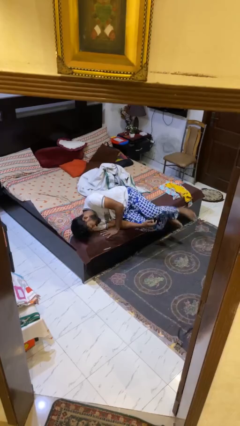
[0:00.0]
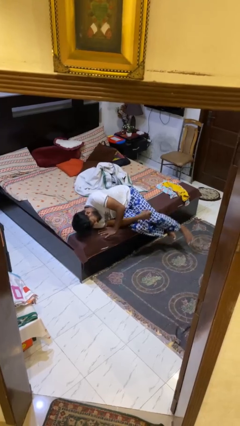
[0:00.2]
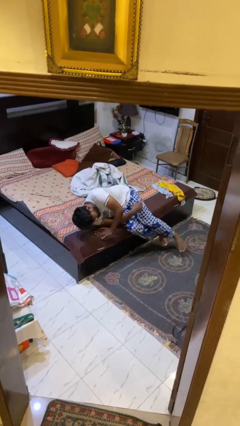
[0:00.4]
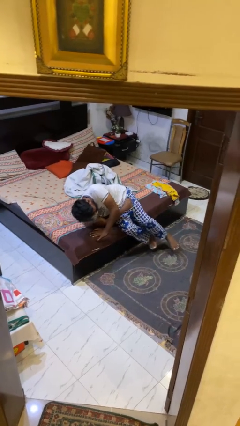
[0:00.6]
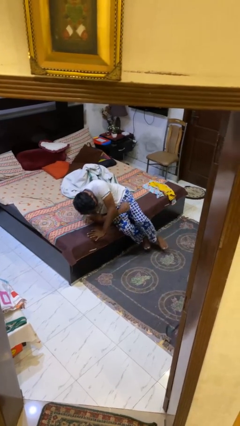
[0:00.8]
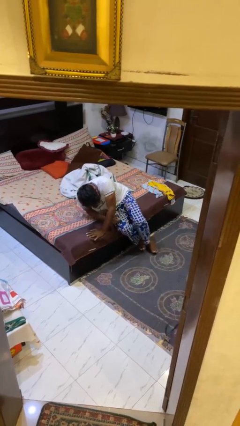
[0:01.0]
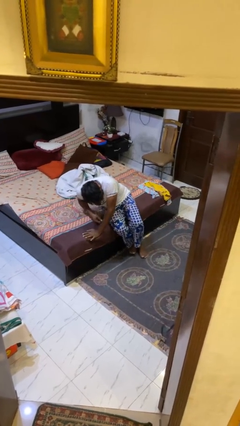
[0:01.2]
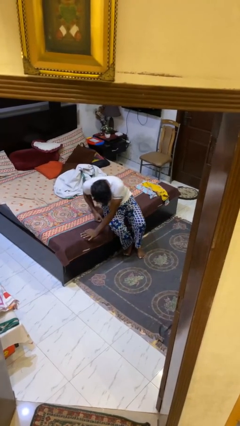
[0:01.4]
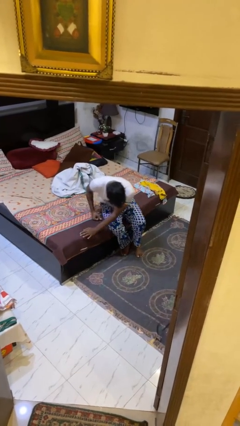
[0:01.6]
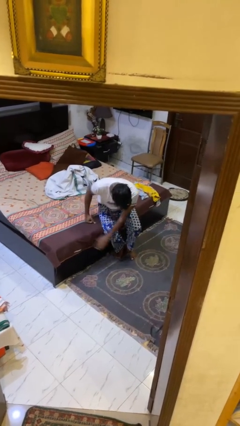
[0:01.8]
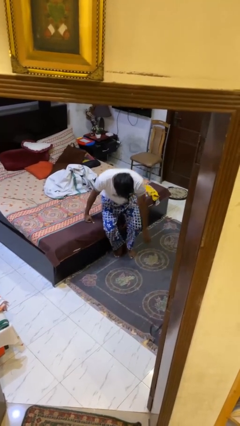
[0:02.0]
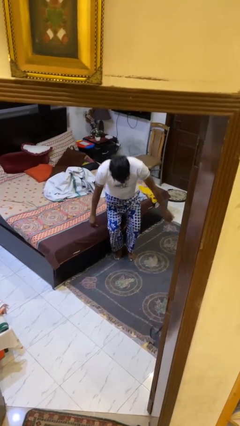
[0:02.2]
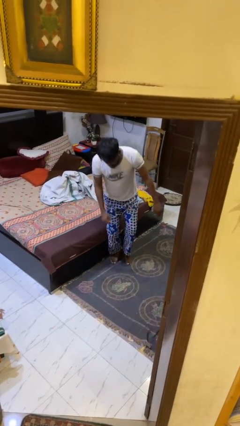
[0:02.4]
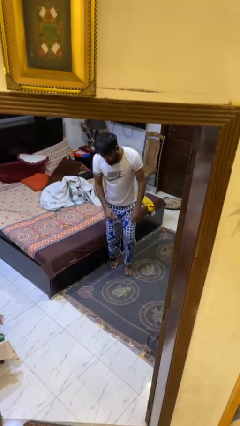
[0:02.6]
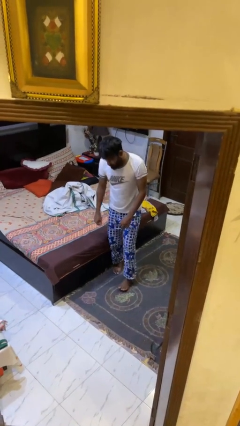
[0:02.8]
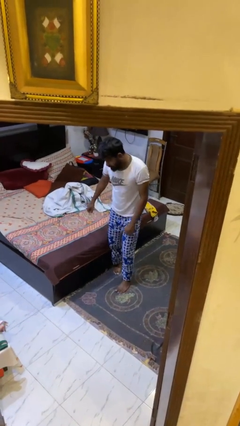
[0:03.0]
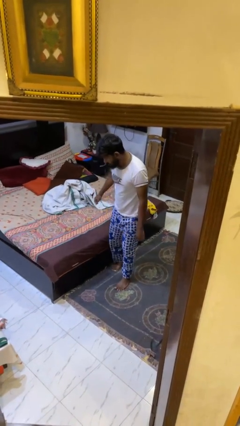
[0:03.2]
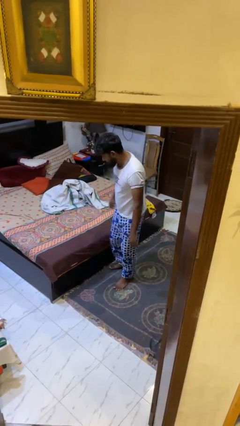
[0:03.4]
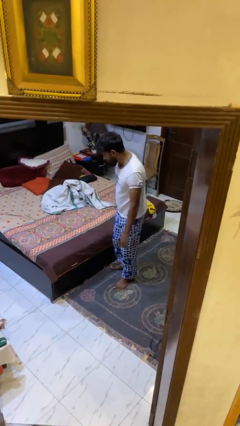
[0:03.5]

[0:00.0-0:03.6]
person stands up

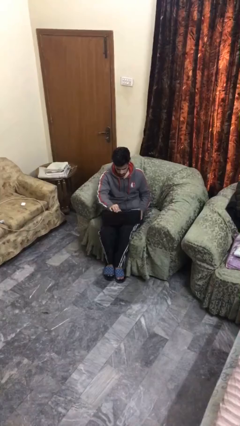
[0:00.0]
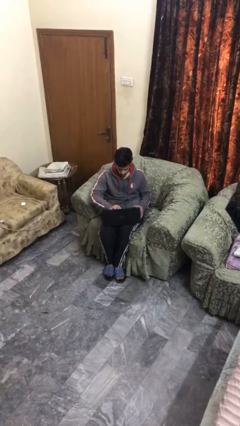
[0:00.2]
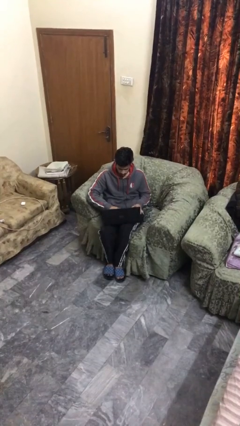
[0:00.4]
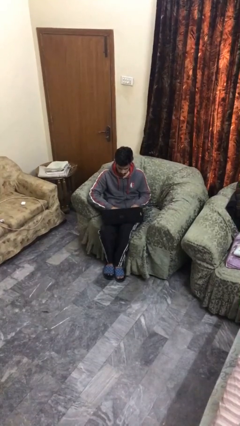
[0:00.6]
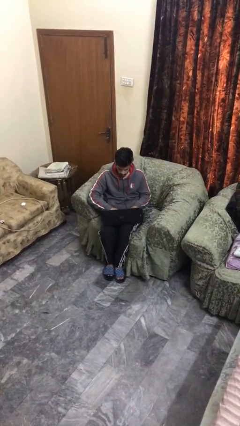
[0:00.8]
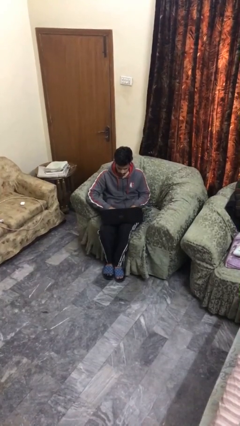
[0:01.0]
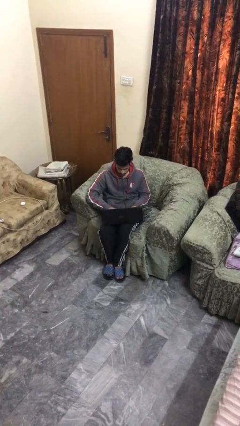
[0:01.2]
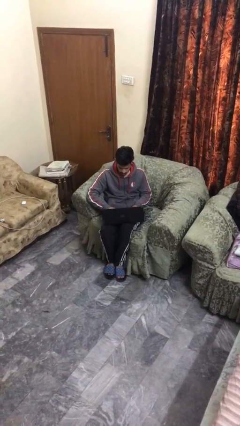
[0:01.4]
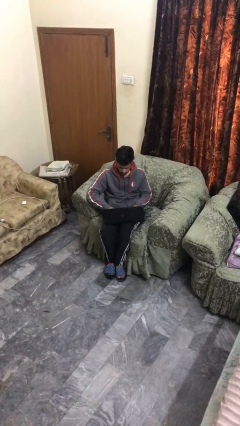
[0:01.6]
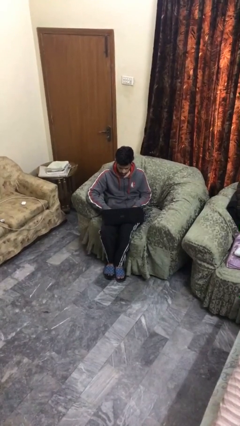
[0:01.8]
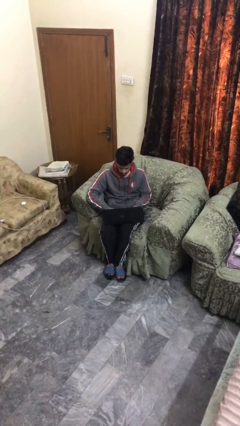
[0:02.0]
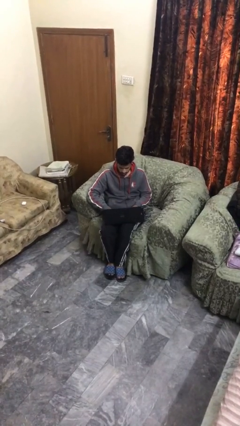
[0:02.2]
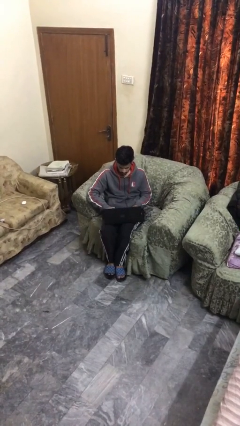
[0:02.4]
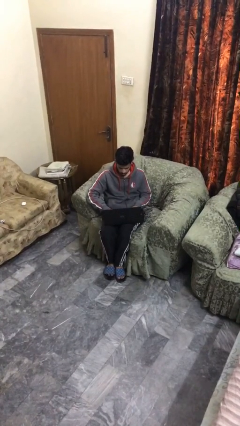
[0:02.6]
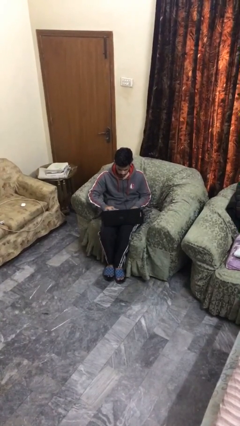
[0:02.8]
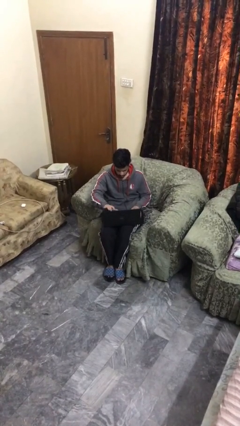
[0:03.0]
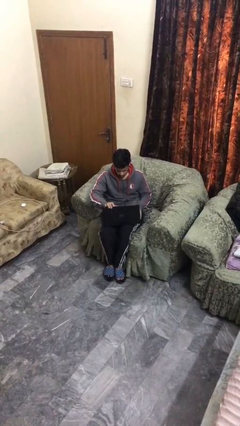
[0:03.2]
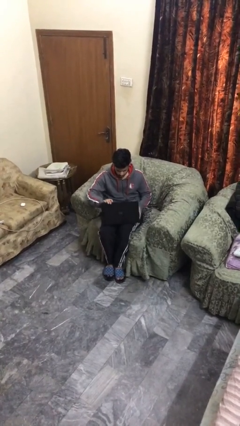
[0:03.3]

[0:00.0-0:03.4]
person interacts with laptop

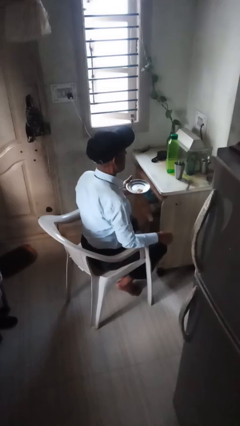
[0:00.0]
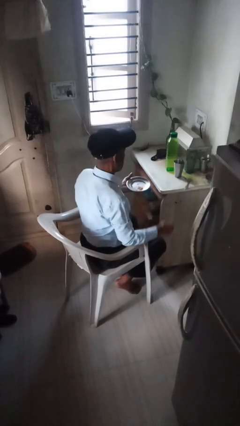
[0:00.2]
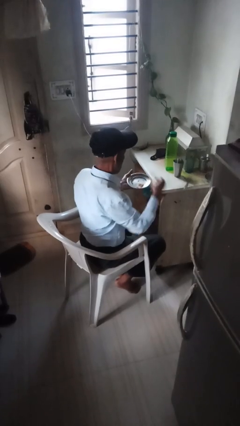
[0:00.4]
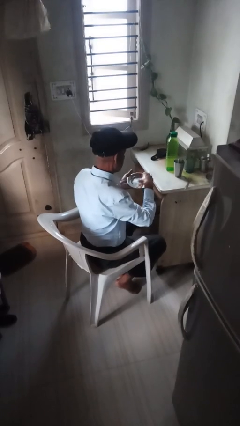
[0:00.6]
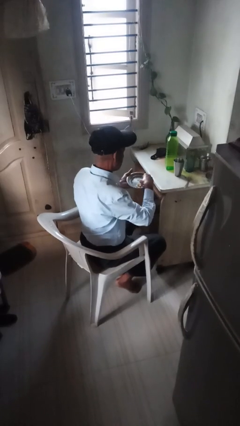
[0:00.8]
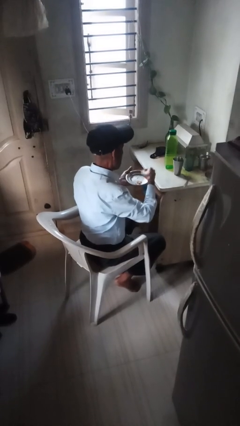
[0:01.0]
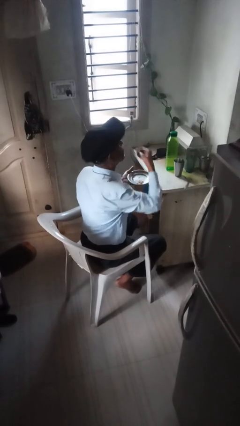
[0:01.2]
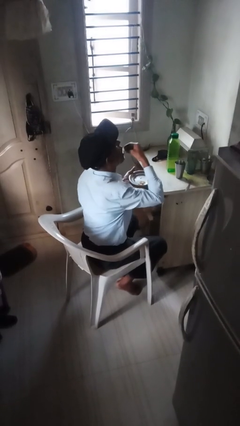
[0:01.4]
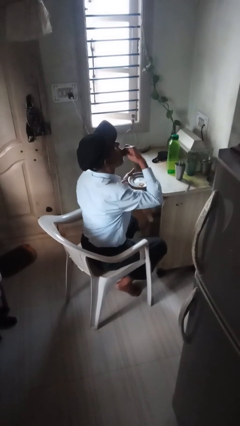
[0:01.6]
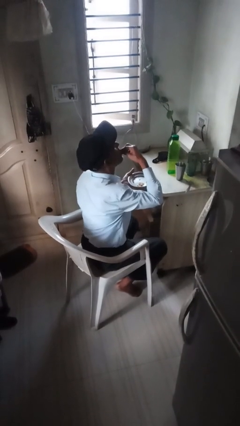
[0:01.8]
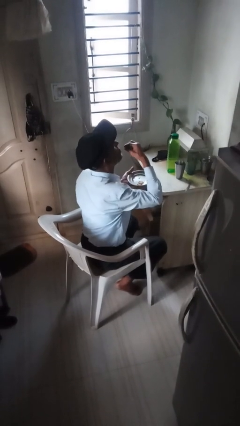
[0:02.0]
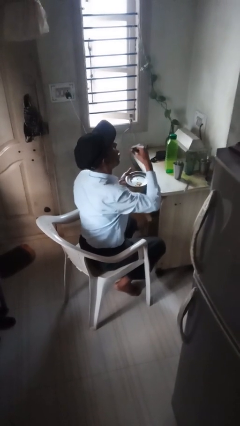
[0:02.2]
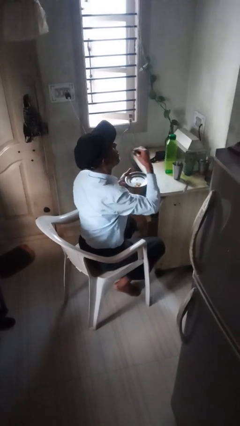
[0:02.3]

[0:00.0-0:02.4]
person eats with hands

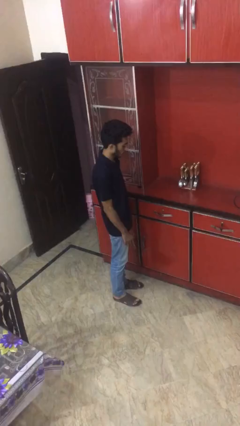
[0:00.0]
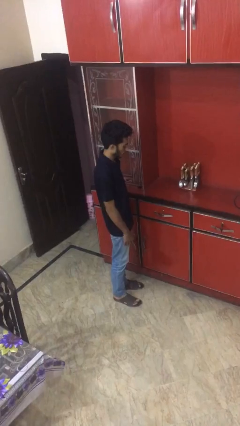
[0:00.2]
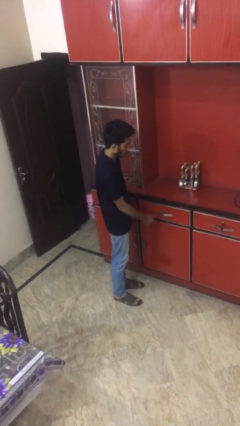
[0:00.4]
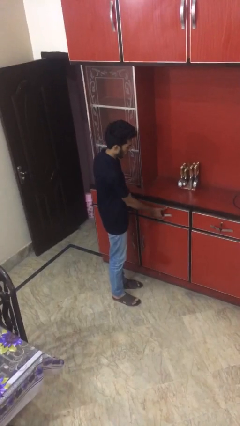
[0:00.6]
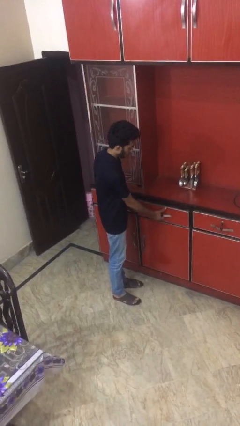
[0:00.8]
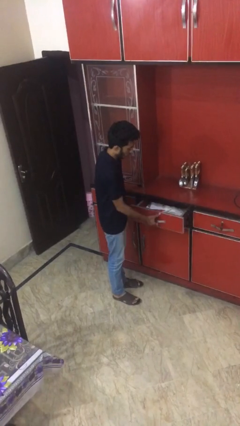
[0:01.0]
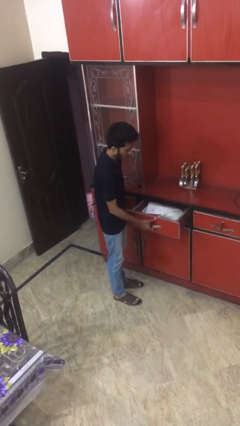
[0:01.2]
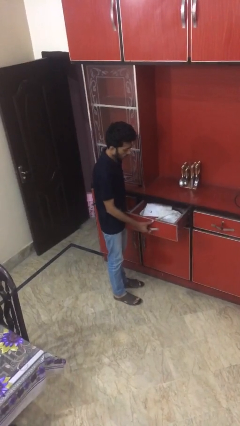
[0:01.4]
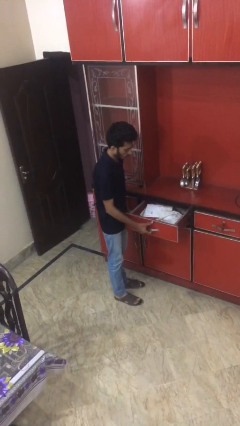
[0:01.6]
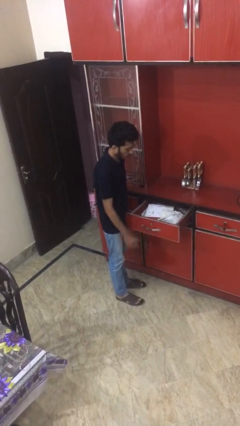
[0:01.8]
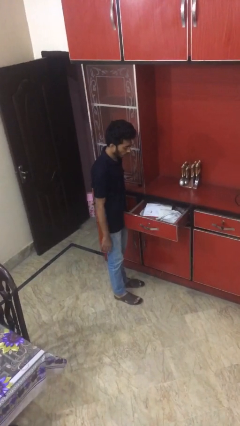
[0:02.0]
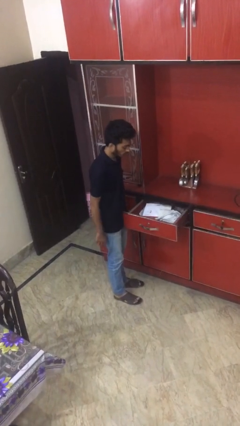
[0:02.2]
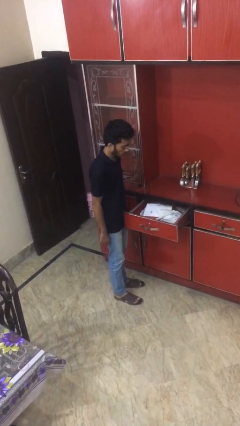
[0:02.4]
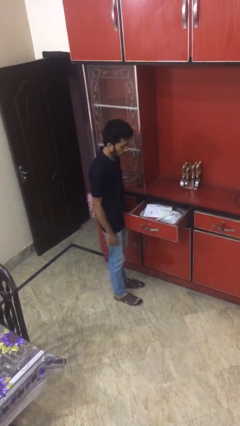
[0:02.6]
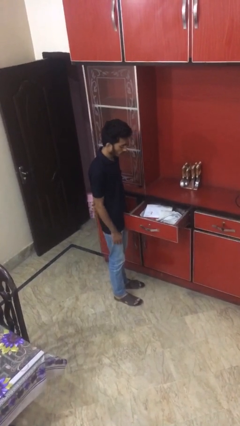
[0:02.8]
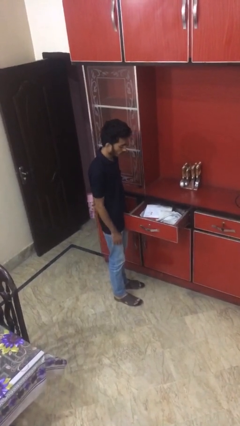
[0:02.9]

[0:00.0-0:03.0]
person opens kitchen drawer

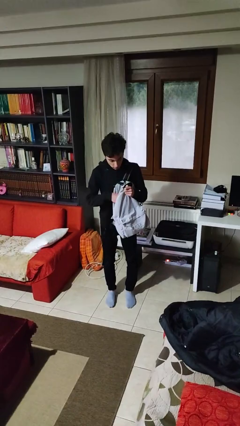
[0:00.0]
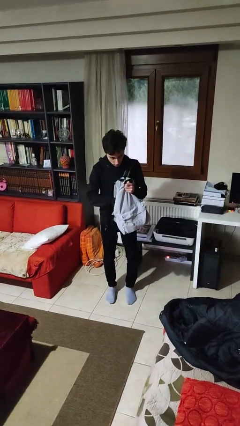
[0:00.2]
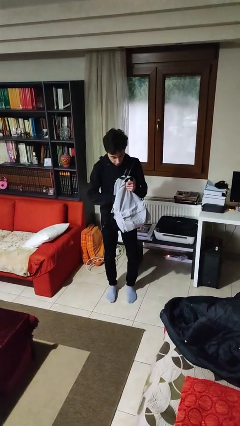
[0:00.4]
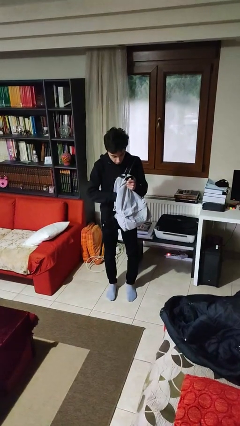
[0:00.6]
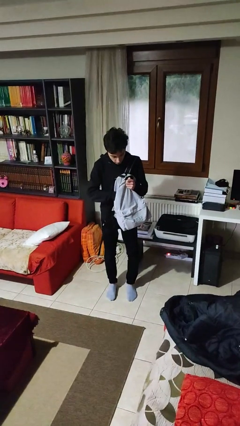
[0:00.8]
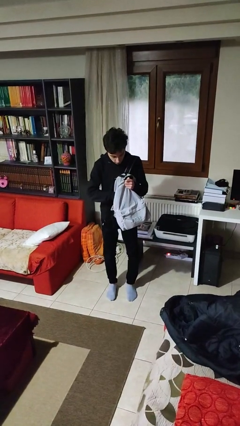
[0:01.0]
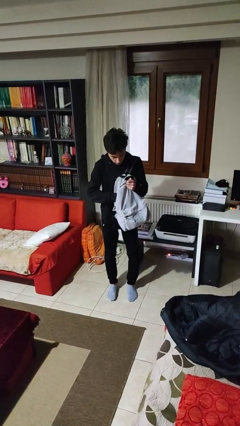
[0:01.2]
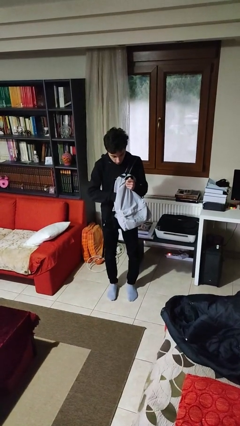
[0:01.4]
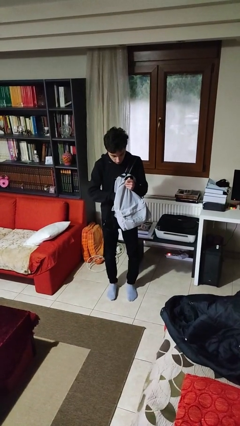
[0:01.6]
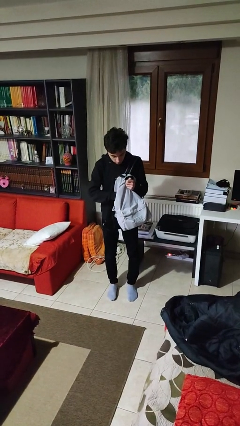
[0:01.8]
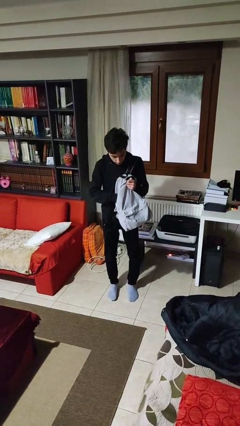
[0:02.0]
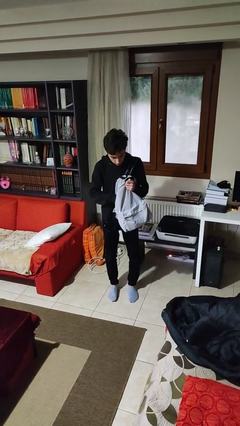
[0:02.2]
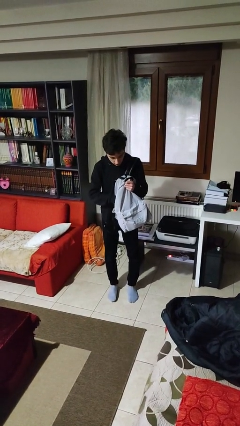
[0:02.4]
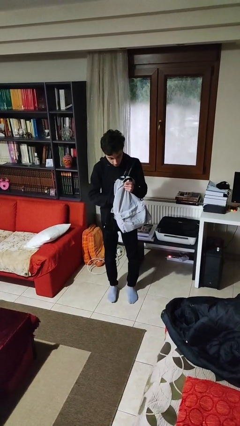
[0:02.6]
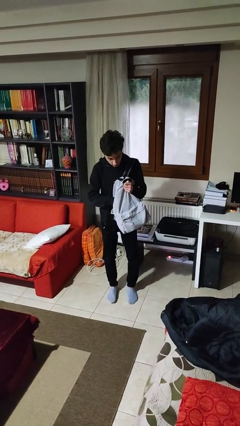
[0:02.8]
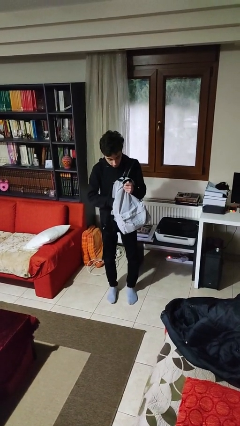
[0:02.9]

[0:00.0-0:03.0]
person searches in backpack

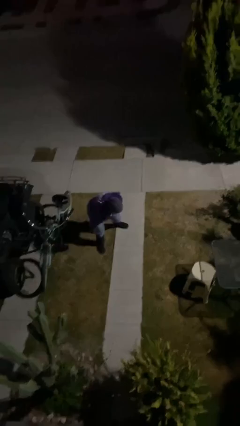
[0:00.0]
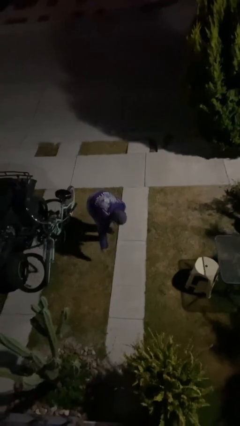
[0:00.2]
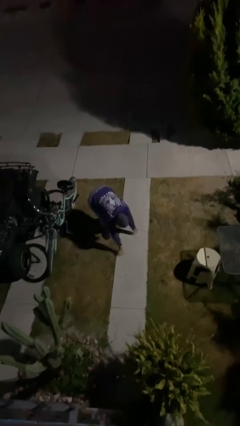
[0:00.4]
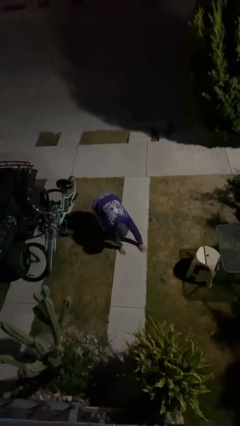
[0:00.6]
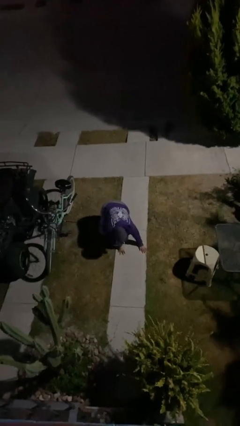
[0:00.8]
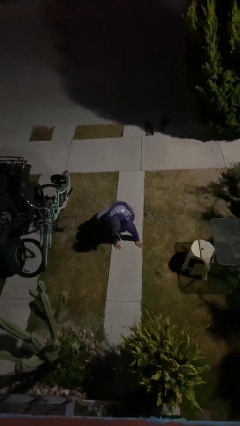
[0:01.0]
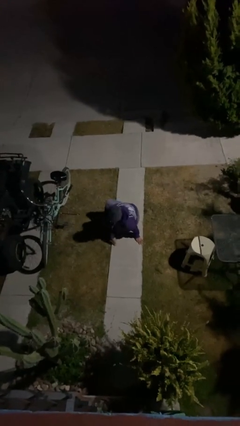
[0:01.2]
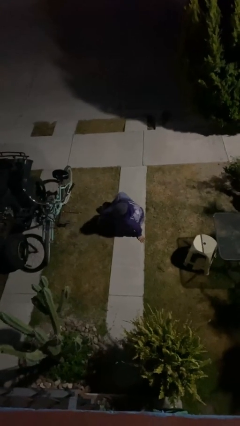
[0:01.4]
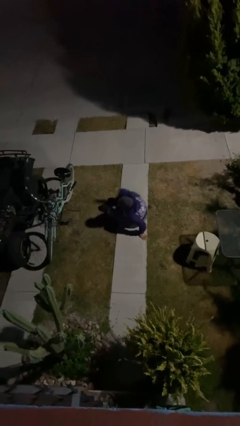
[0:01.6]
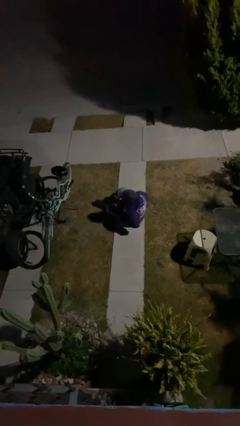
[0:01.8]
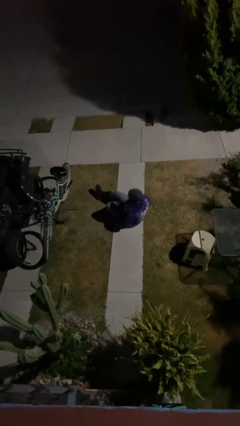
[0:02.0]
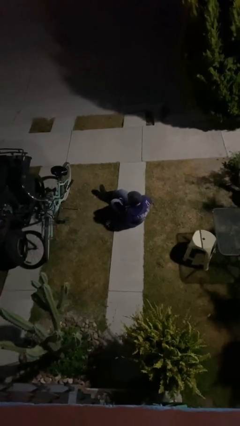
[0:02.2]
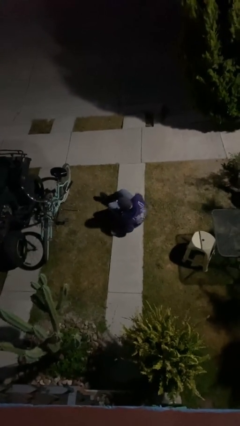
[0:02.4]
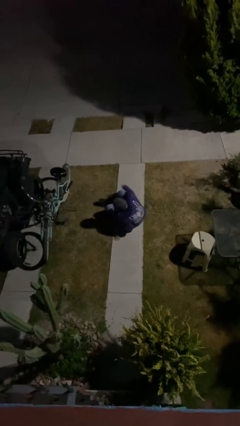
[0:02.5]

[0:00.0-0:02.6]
person sits down
